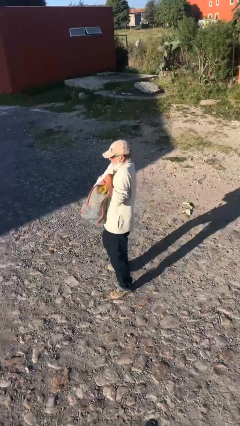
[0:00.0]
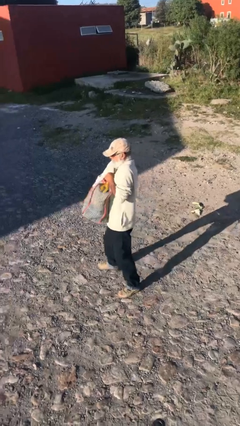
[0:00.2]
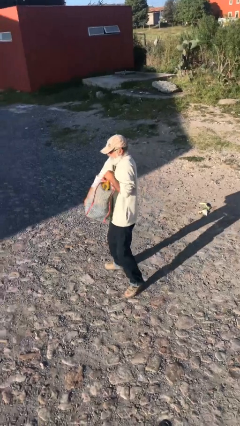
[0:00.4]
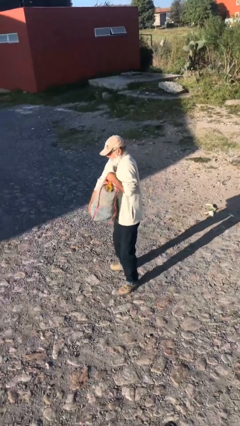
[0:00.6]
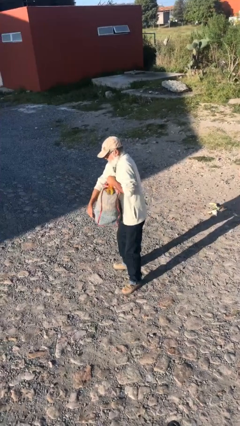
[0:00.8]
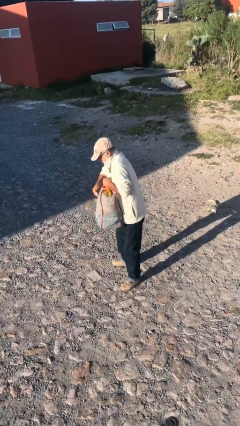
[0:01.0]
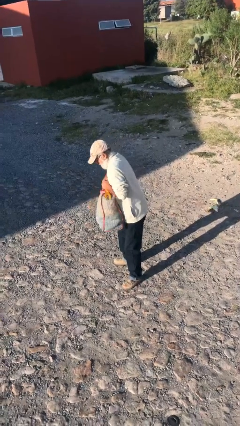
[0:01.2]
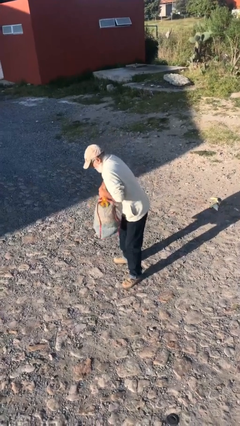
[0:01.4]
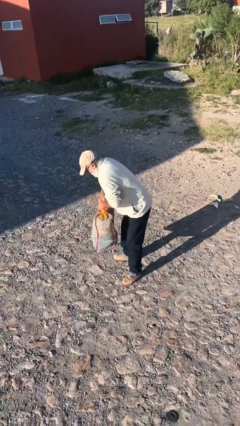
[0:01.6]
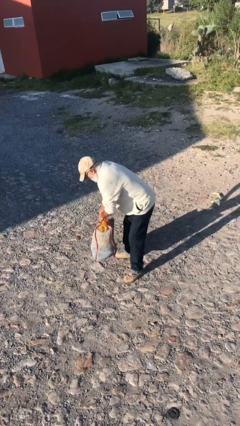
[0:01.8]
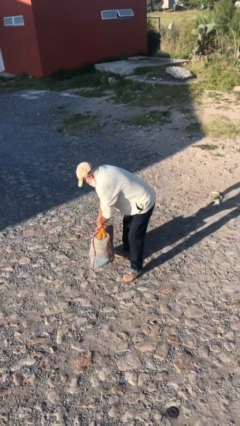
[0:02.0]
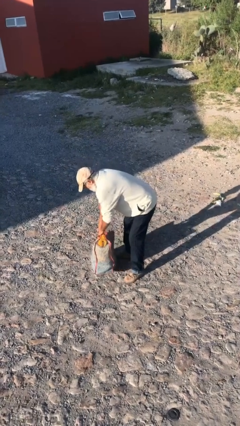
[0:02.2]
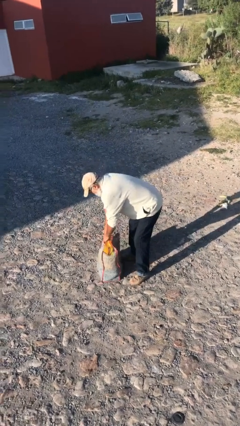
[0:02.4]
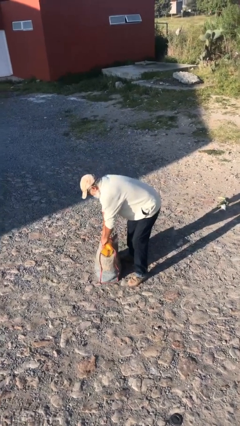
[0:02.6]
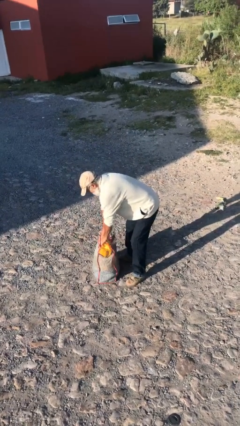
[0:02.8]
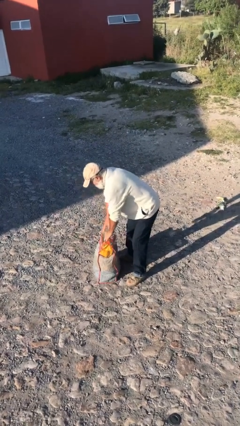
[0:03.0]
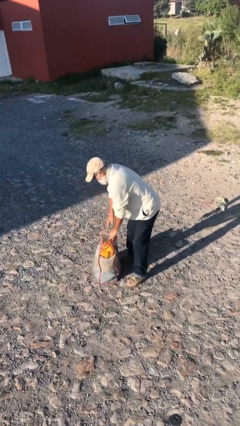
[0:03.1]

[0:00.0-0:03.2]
person puts down object on floor

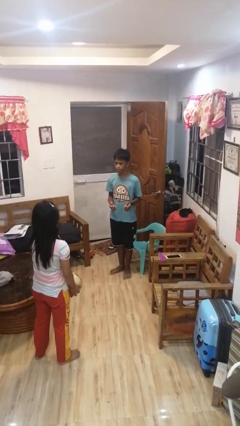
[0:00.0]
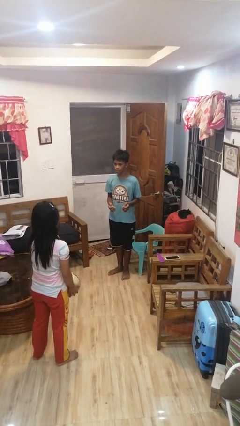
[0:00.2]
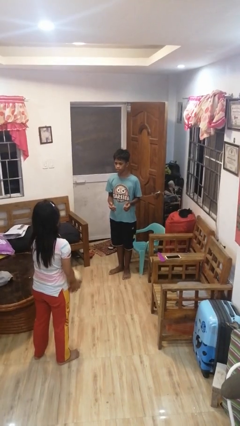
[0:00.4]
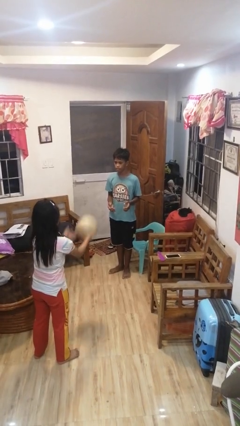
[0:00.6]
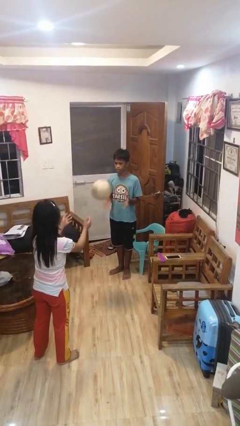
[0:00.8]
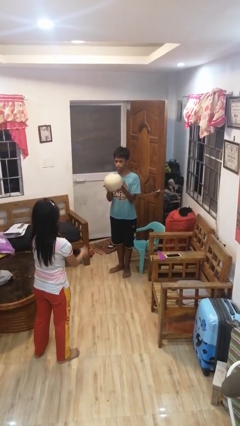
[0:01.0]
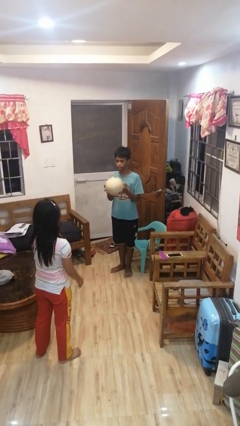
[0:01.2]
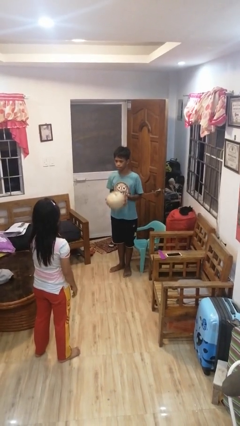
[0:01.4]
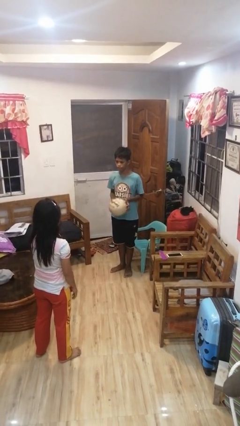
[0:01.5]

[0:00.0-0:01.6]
person catches object from person

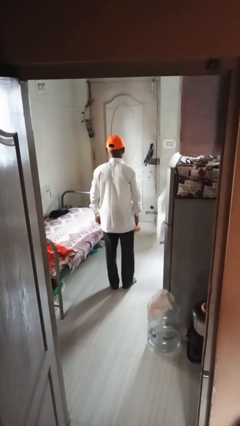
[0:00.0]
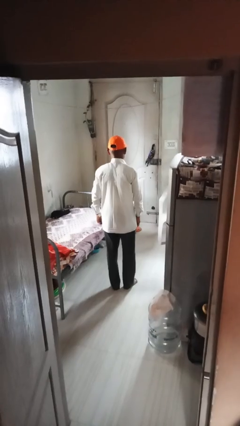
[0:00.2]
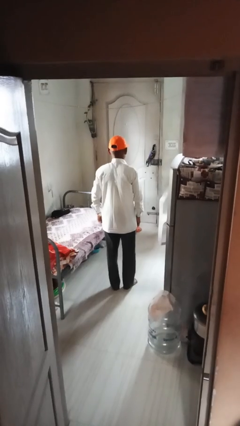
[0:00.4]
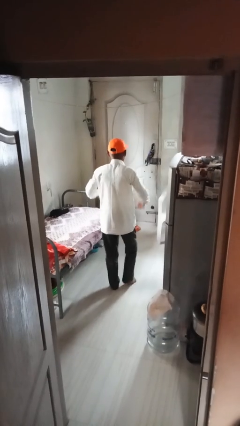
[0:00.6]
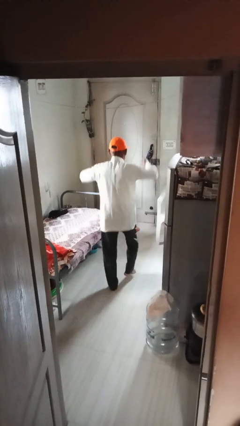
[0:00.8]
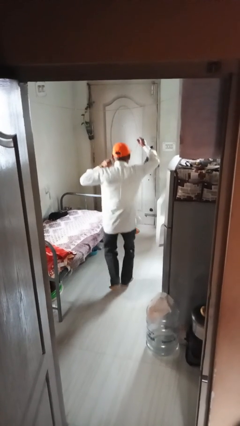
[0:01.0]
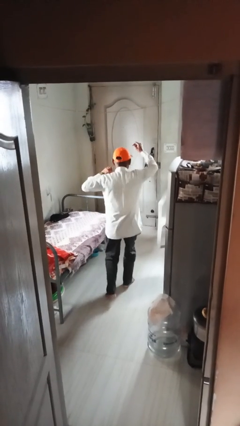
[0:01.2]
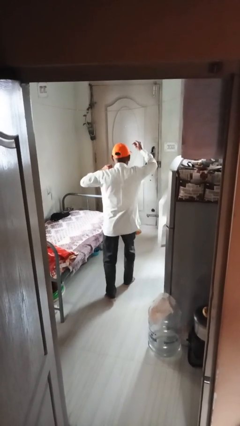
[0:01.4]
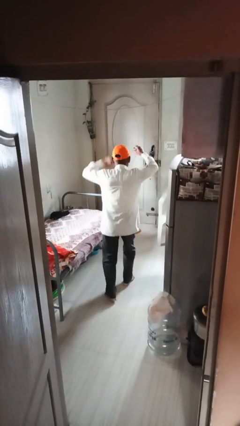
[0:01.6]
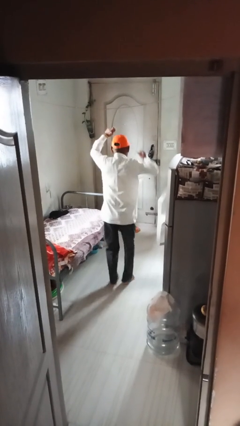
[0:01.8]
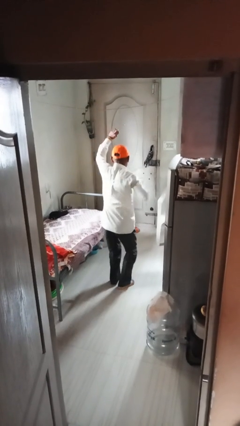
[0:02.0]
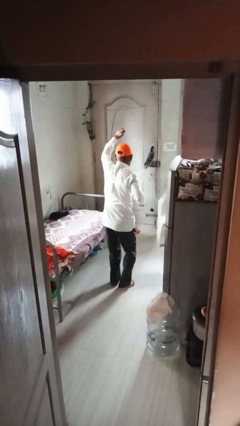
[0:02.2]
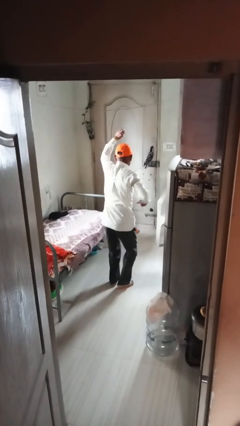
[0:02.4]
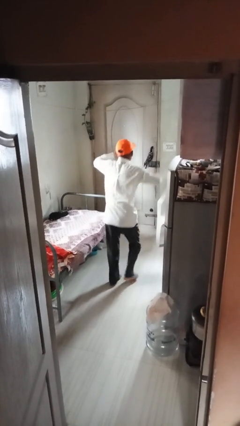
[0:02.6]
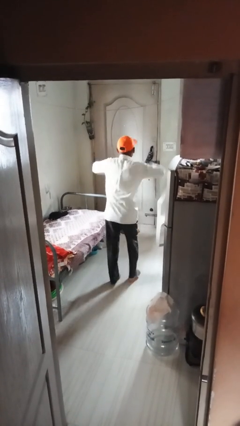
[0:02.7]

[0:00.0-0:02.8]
person dances in place

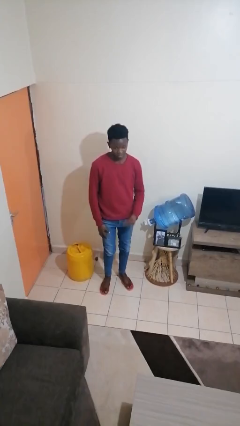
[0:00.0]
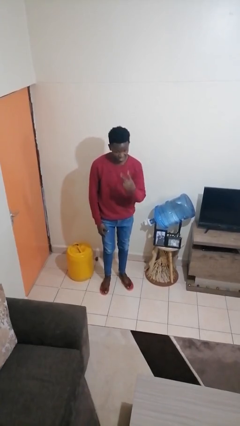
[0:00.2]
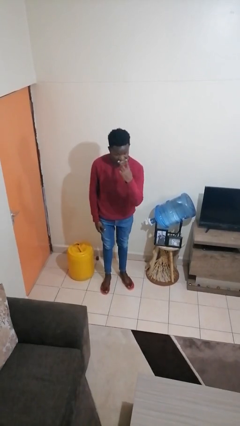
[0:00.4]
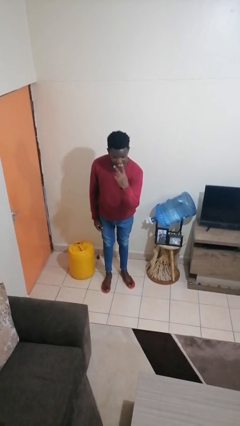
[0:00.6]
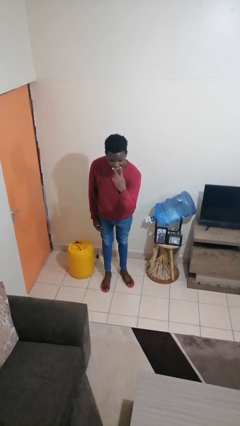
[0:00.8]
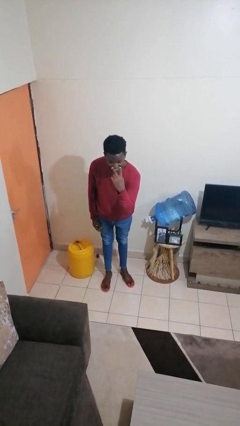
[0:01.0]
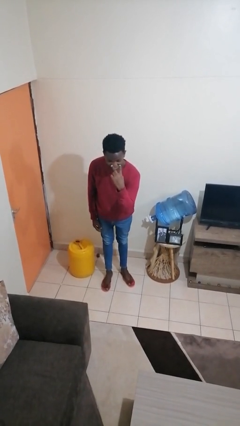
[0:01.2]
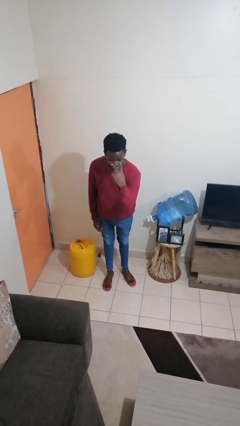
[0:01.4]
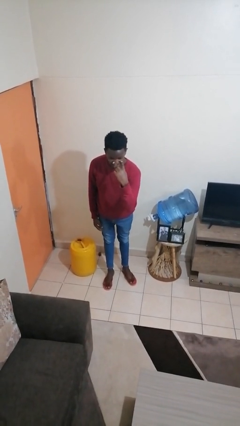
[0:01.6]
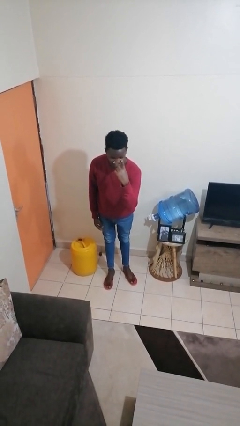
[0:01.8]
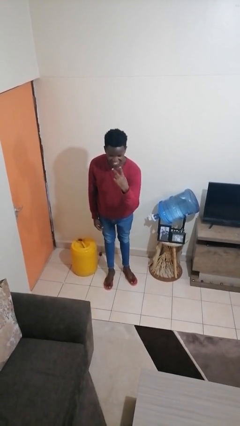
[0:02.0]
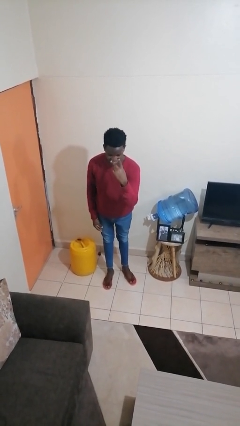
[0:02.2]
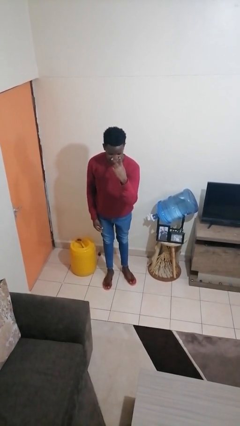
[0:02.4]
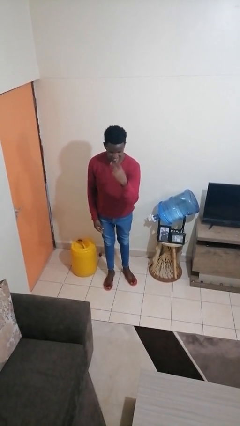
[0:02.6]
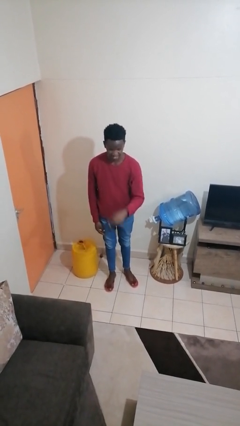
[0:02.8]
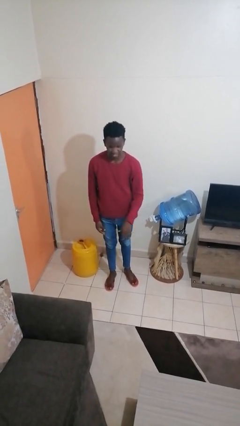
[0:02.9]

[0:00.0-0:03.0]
person gestures watch closely

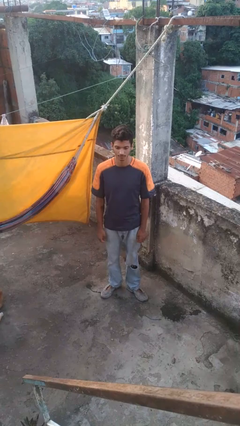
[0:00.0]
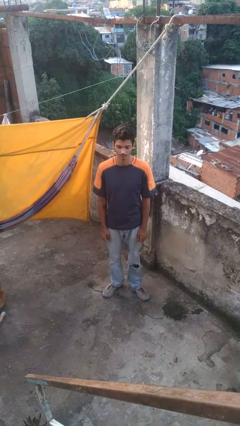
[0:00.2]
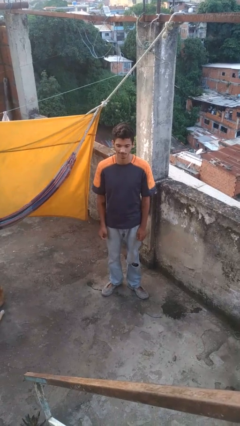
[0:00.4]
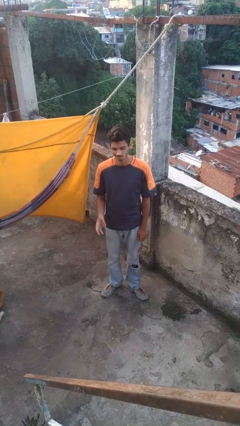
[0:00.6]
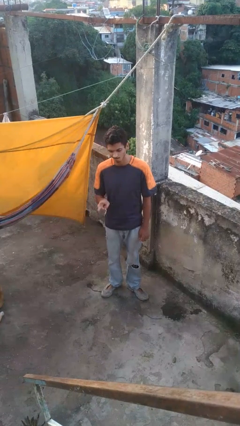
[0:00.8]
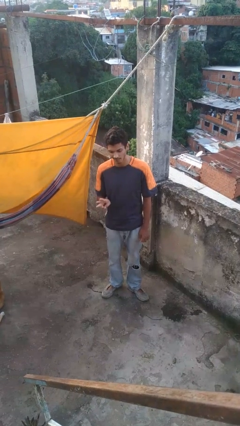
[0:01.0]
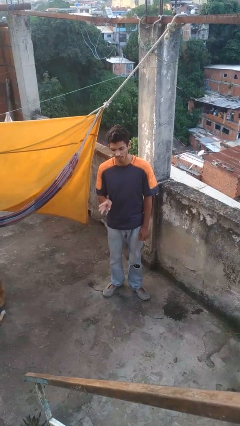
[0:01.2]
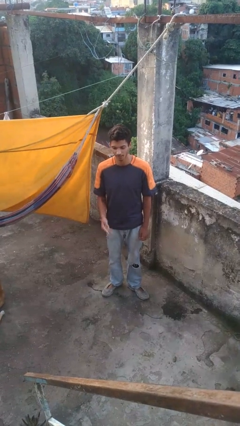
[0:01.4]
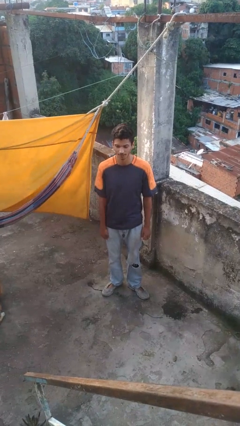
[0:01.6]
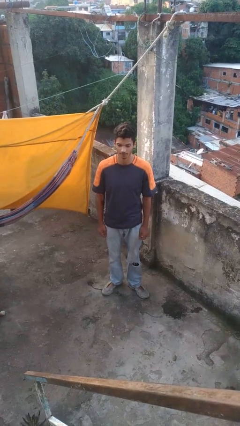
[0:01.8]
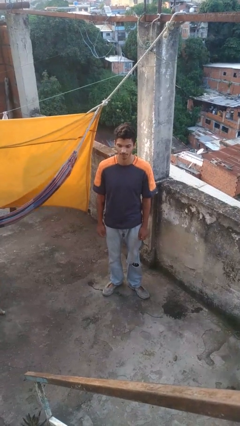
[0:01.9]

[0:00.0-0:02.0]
person gestures number three

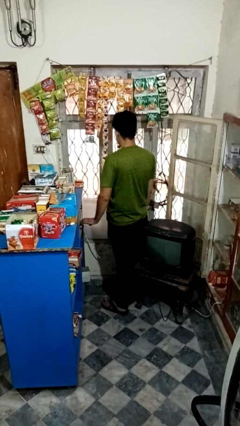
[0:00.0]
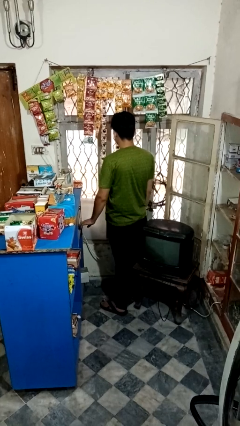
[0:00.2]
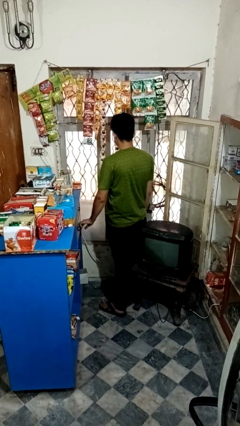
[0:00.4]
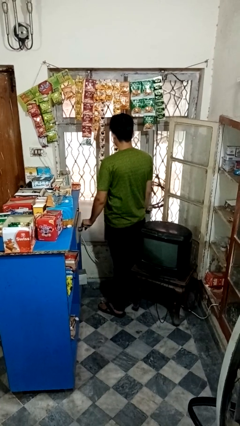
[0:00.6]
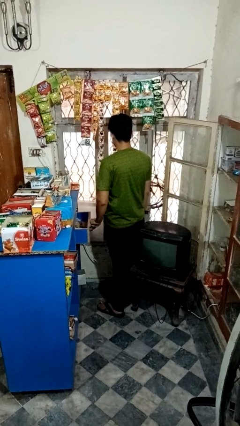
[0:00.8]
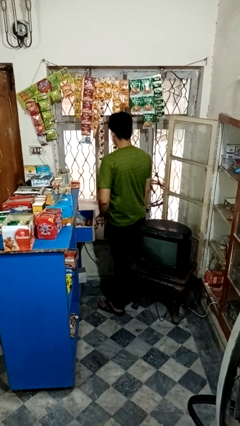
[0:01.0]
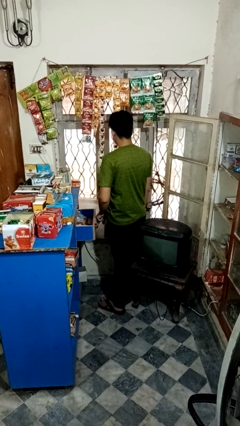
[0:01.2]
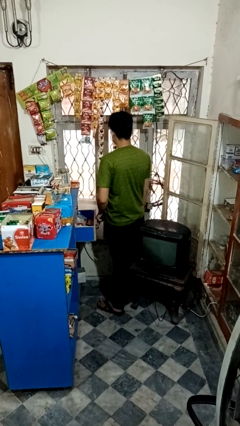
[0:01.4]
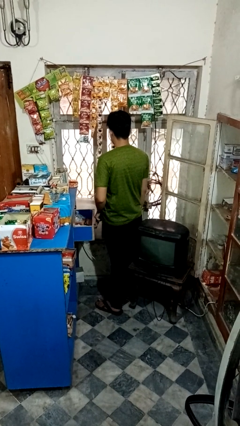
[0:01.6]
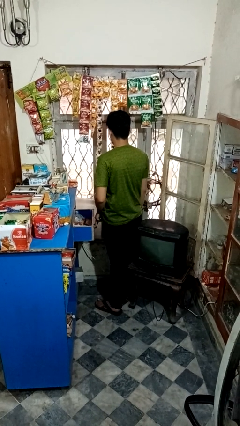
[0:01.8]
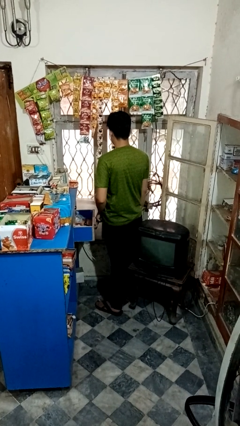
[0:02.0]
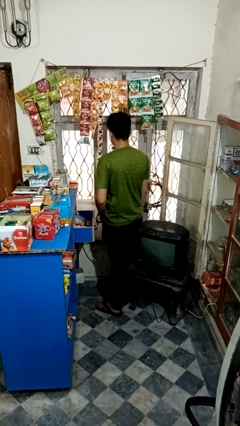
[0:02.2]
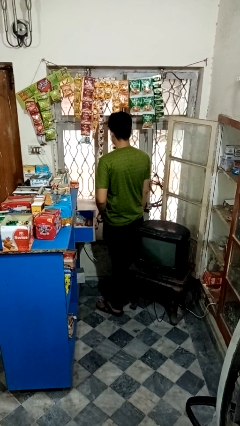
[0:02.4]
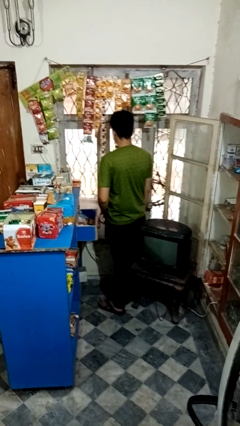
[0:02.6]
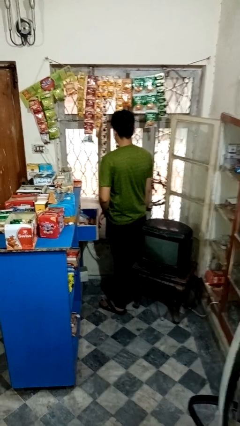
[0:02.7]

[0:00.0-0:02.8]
person opens kitchen drawer

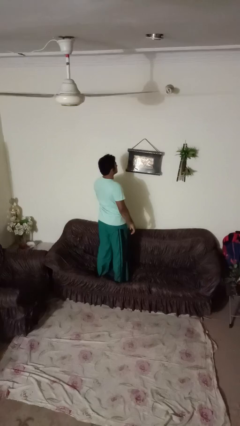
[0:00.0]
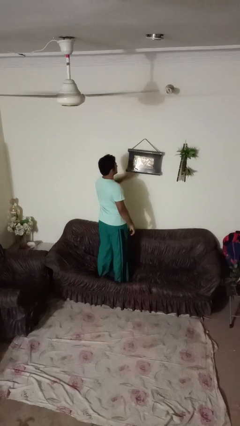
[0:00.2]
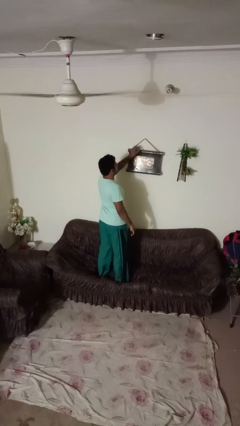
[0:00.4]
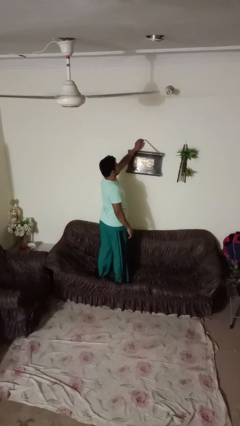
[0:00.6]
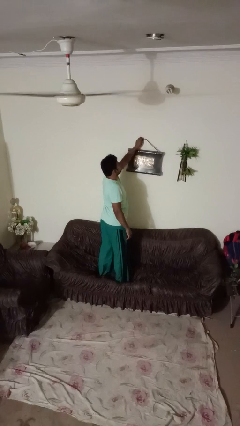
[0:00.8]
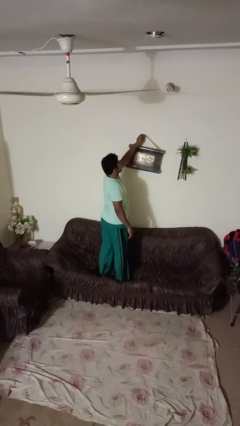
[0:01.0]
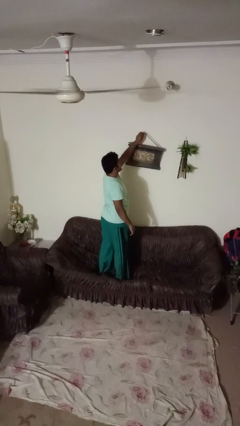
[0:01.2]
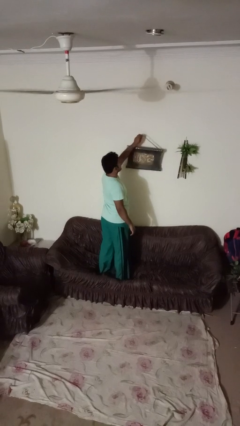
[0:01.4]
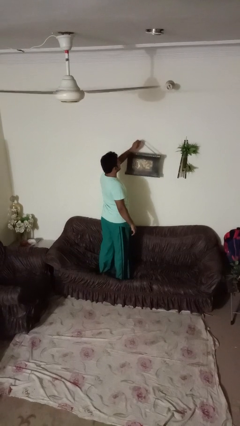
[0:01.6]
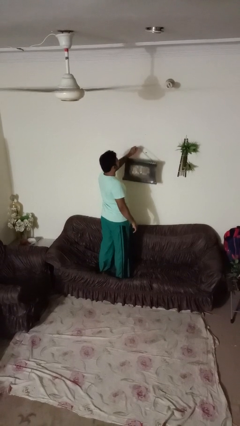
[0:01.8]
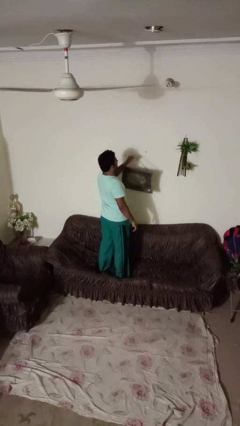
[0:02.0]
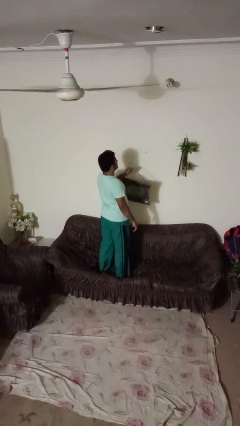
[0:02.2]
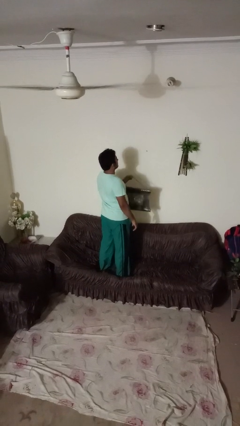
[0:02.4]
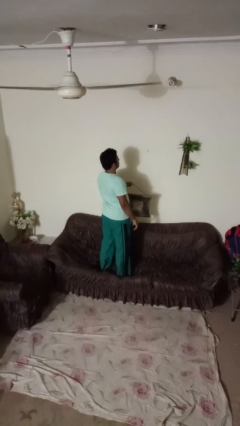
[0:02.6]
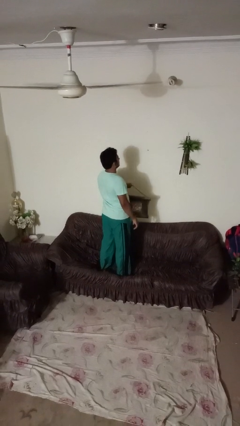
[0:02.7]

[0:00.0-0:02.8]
person takes down picture frame
